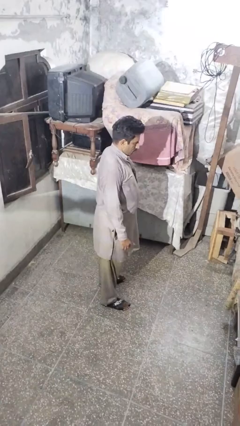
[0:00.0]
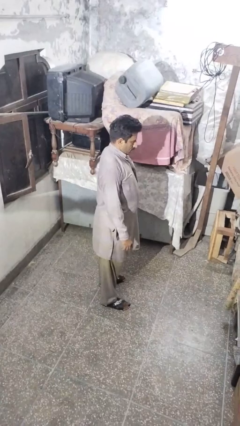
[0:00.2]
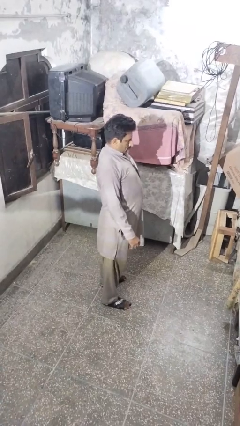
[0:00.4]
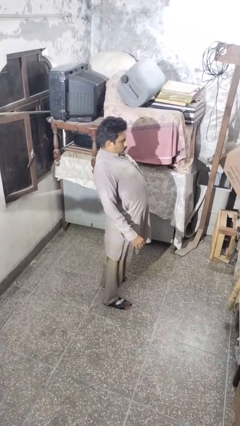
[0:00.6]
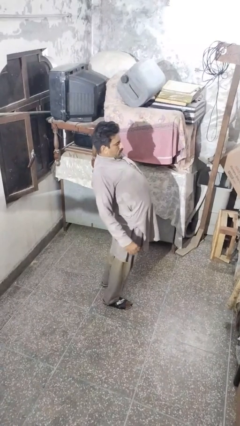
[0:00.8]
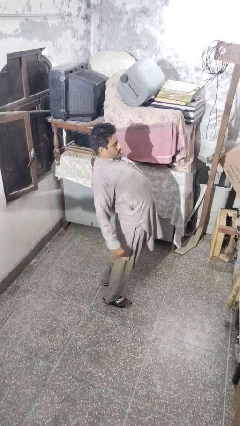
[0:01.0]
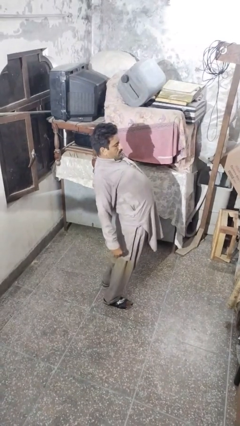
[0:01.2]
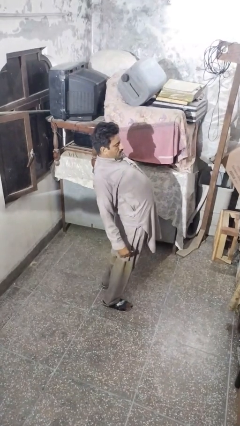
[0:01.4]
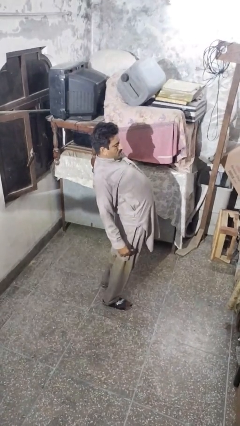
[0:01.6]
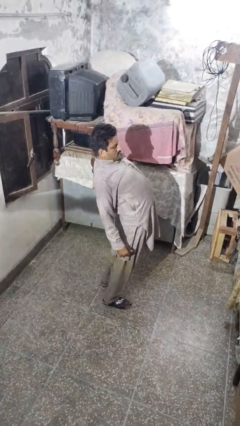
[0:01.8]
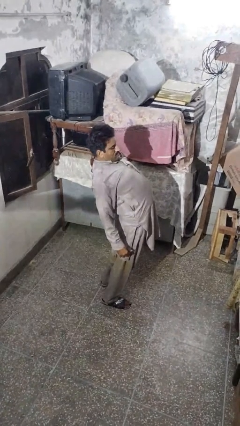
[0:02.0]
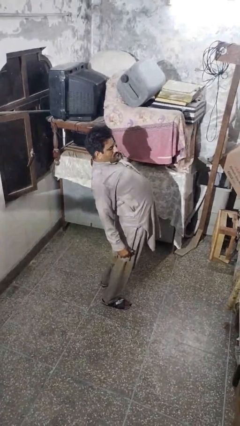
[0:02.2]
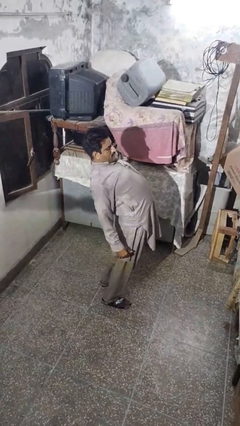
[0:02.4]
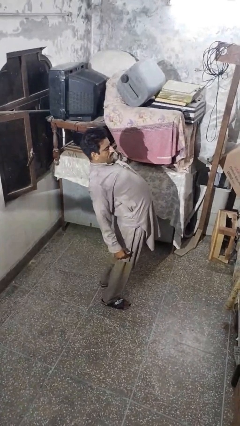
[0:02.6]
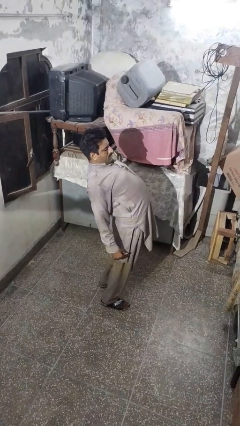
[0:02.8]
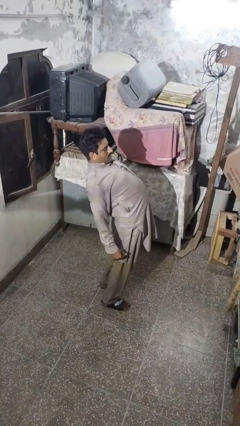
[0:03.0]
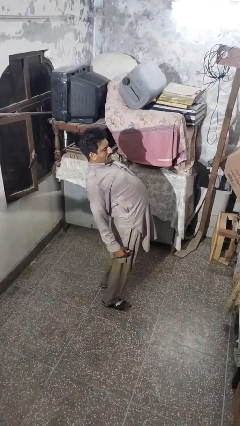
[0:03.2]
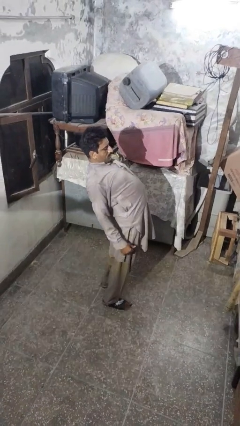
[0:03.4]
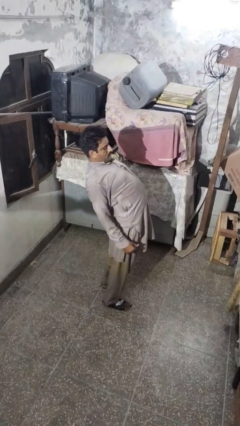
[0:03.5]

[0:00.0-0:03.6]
person stretches back

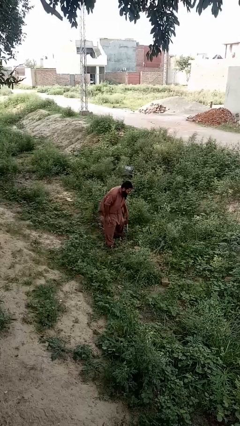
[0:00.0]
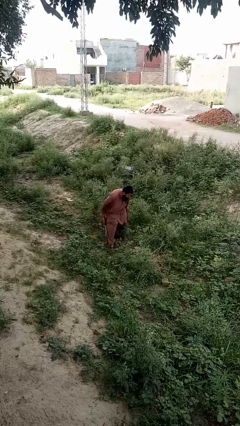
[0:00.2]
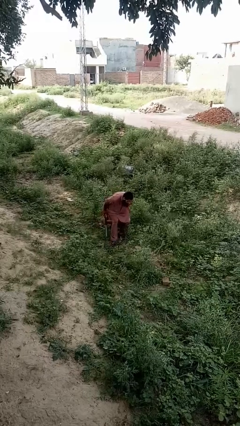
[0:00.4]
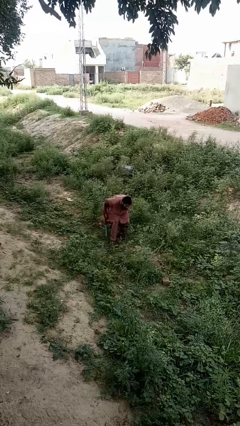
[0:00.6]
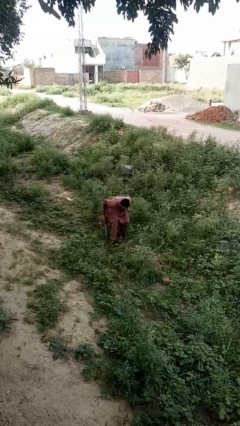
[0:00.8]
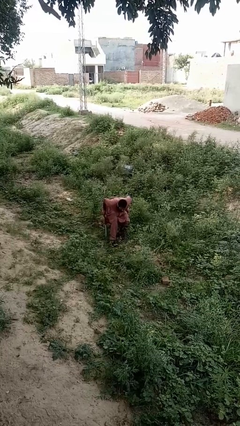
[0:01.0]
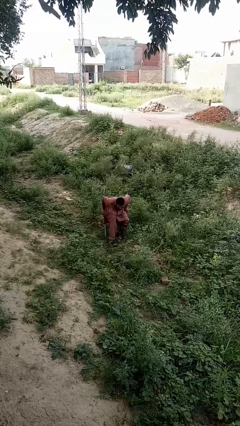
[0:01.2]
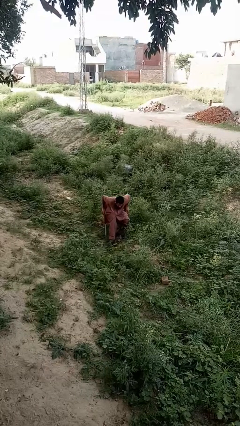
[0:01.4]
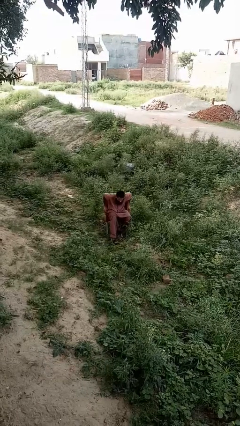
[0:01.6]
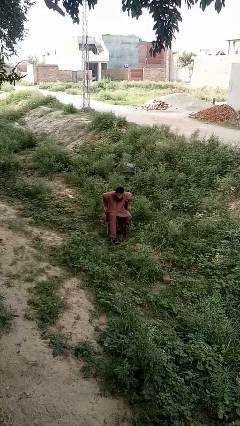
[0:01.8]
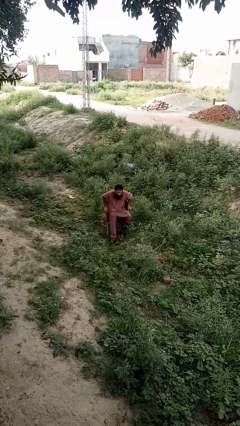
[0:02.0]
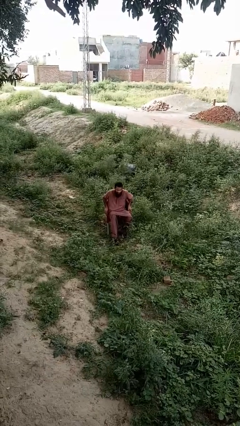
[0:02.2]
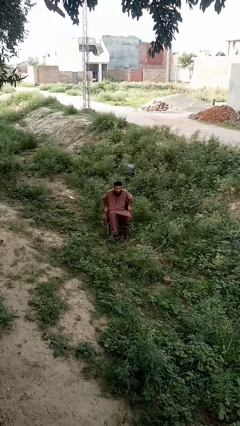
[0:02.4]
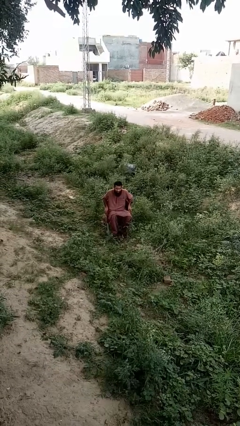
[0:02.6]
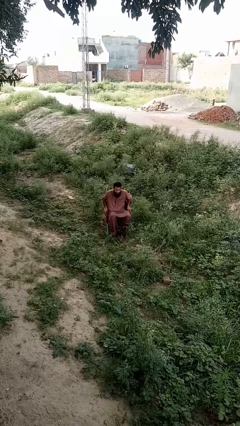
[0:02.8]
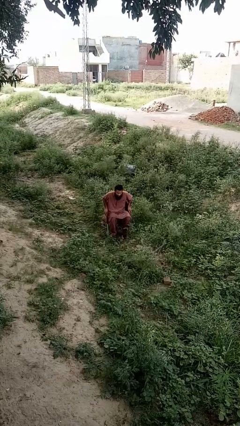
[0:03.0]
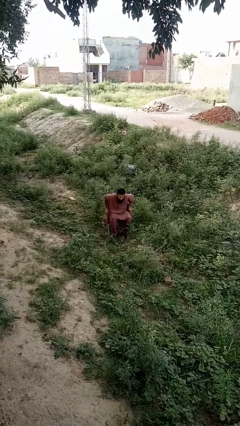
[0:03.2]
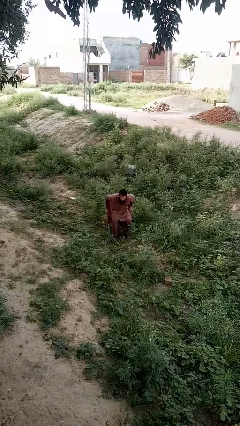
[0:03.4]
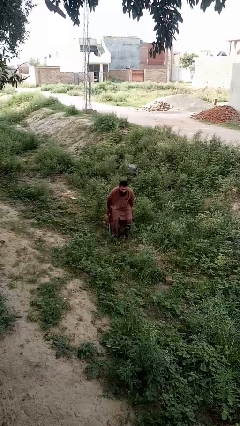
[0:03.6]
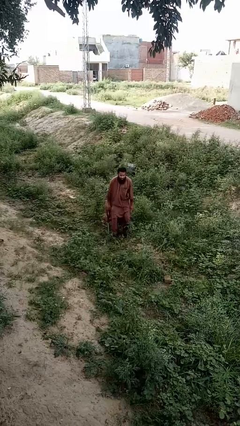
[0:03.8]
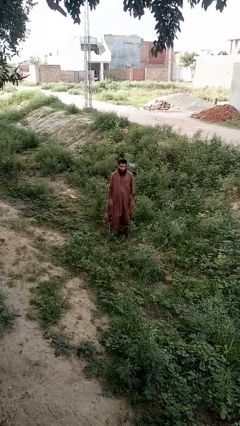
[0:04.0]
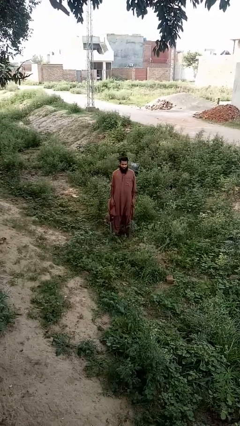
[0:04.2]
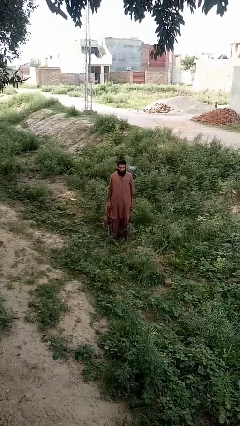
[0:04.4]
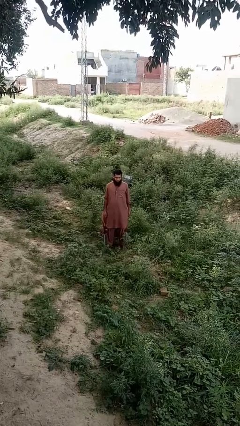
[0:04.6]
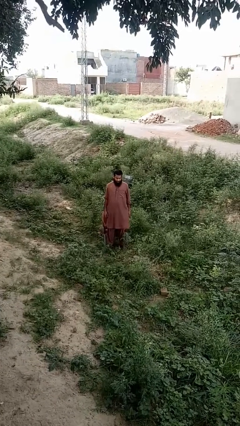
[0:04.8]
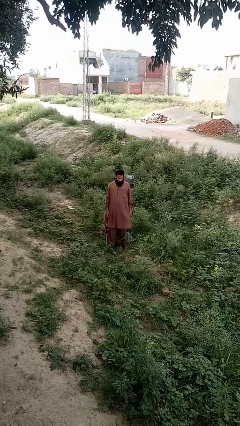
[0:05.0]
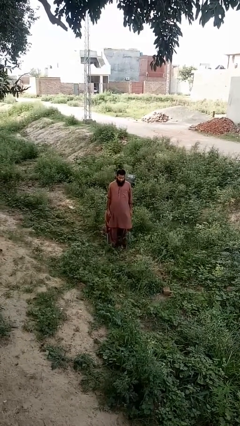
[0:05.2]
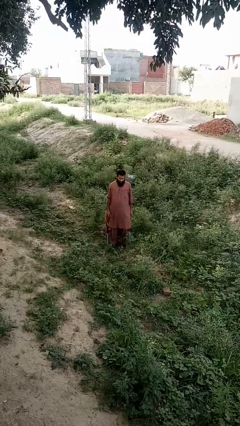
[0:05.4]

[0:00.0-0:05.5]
person sits down

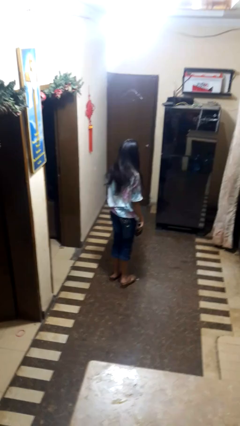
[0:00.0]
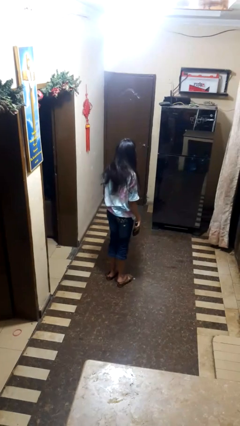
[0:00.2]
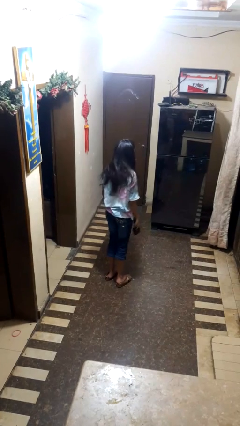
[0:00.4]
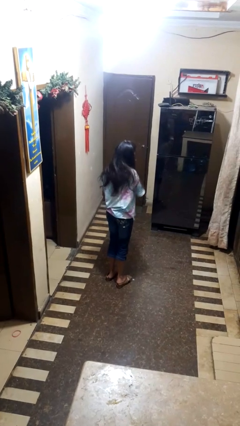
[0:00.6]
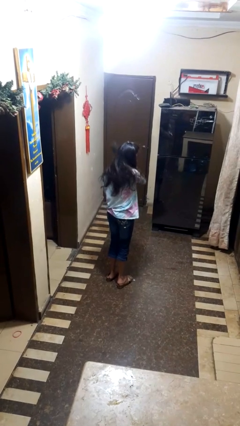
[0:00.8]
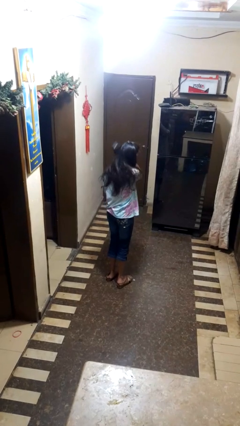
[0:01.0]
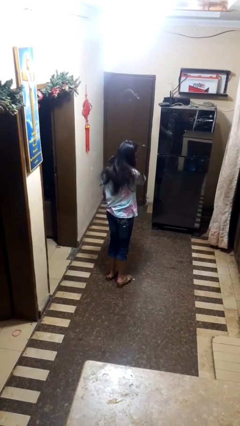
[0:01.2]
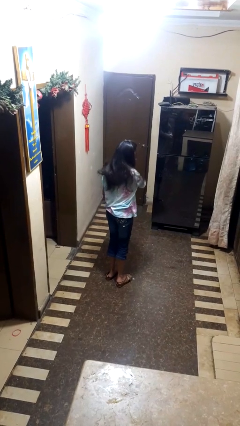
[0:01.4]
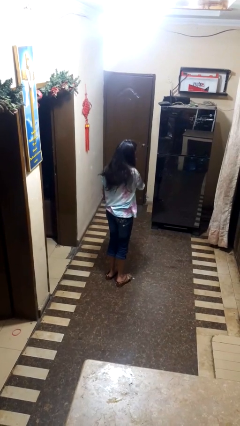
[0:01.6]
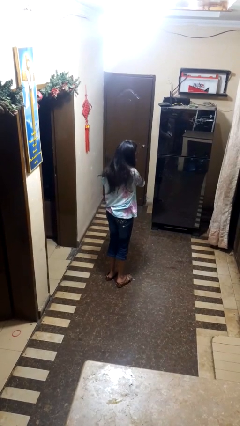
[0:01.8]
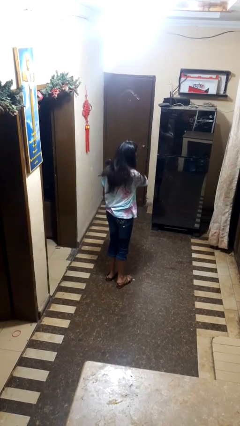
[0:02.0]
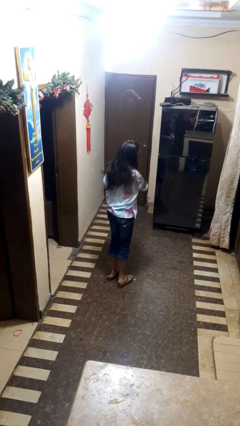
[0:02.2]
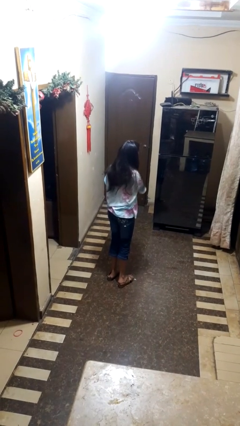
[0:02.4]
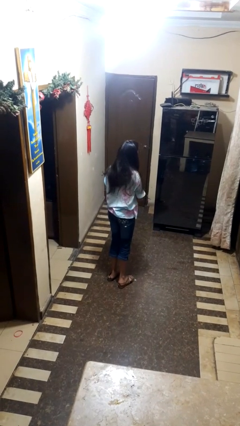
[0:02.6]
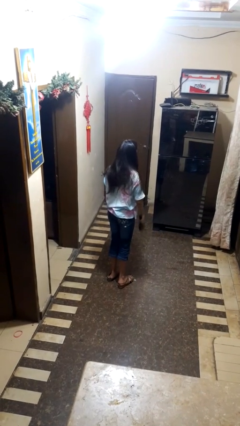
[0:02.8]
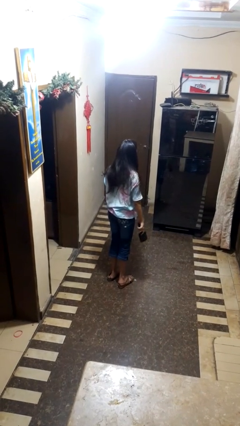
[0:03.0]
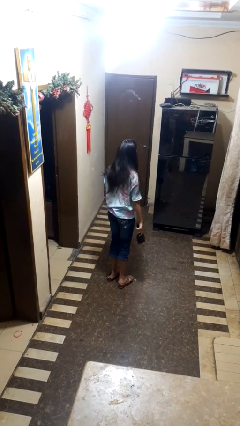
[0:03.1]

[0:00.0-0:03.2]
person brushes hair

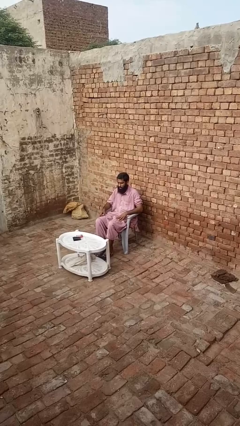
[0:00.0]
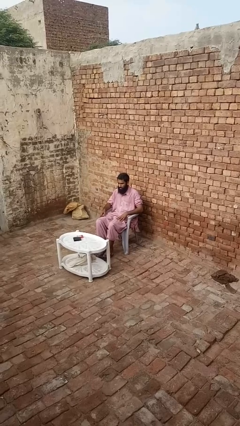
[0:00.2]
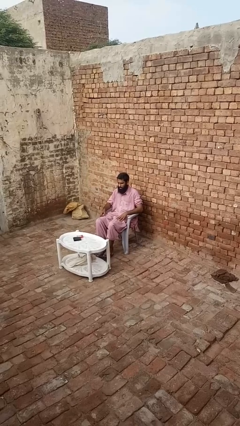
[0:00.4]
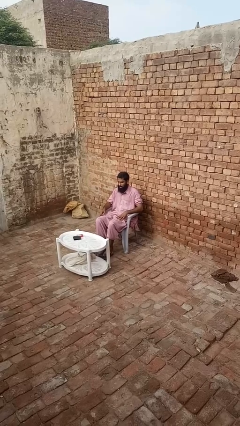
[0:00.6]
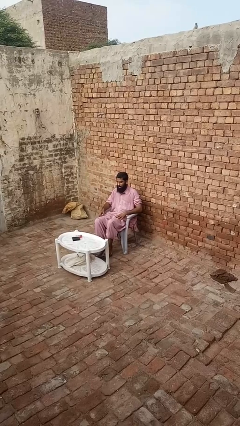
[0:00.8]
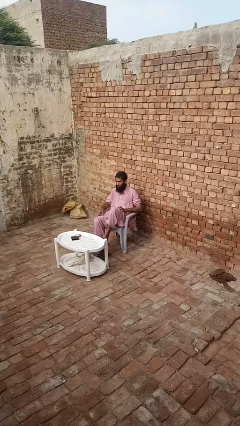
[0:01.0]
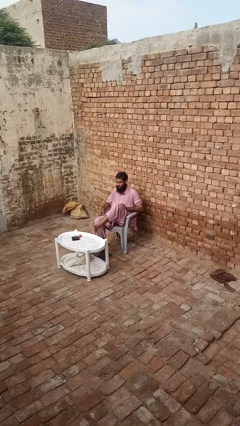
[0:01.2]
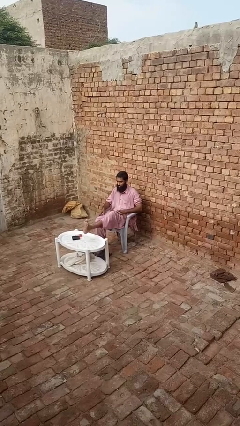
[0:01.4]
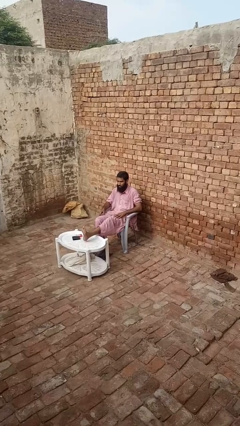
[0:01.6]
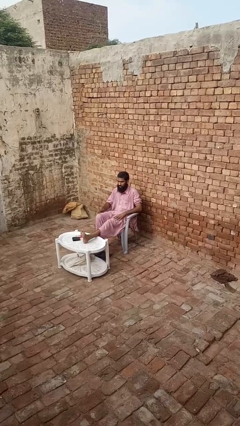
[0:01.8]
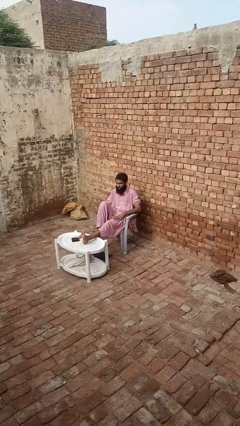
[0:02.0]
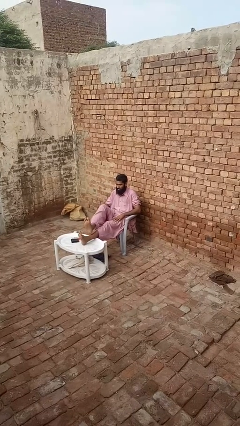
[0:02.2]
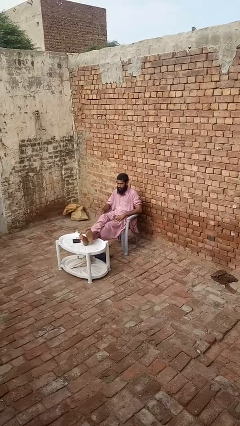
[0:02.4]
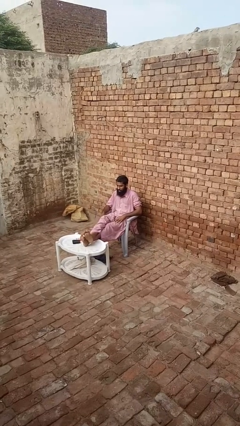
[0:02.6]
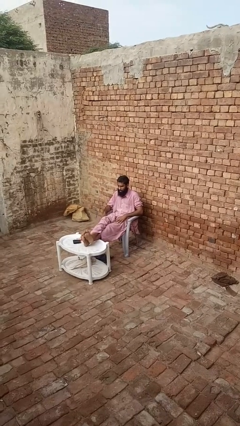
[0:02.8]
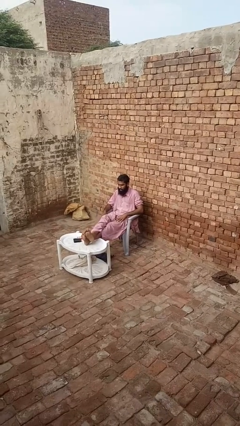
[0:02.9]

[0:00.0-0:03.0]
person puts feet up

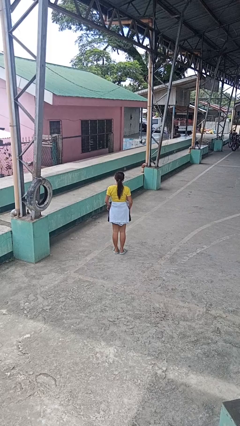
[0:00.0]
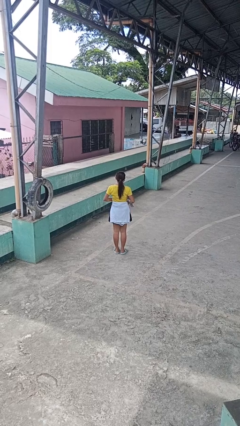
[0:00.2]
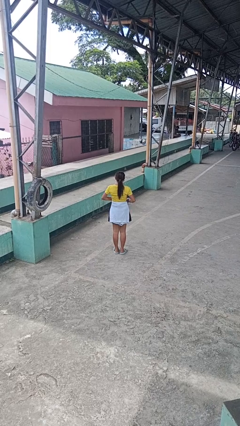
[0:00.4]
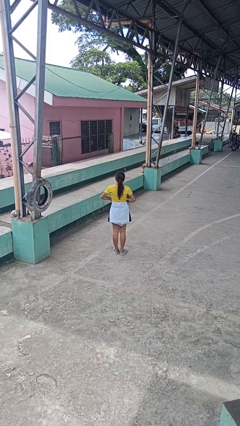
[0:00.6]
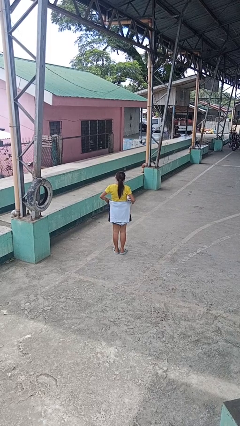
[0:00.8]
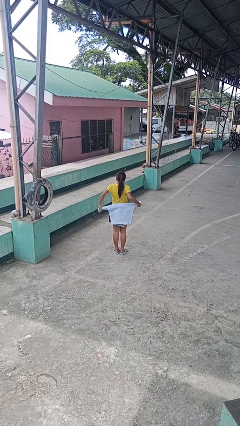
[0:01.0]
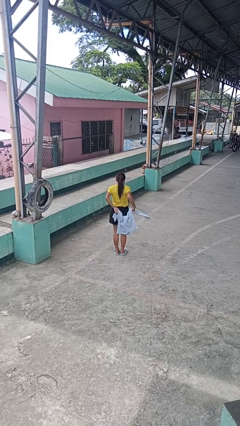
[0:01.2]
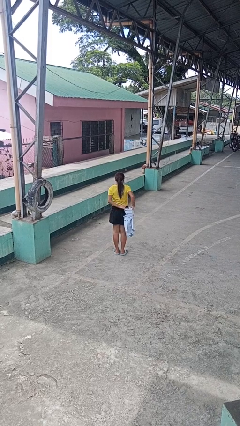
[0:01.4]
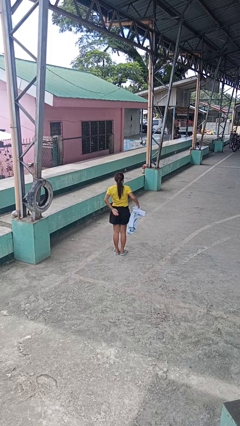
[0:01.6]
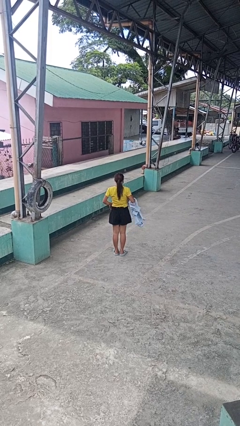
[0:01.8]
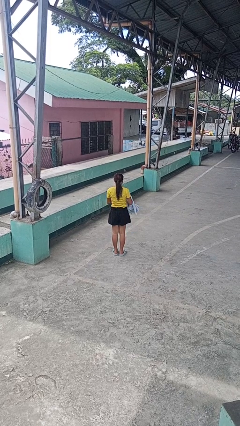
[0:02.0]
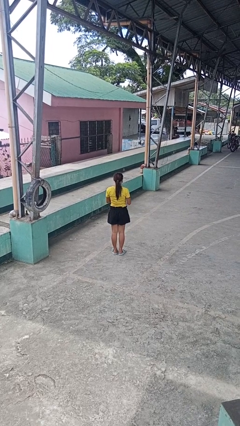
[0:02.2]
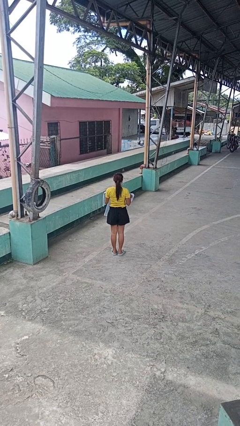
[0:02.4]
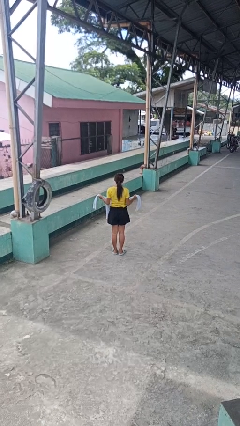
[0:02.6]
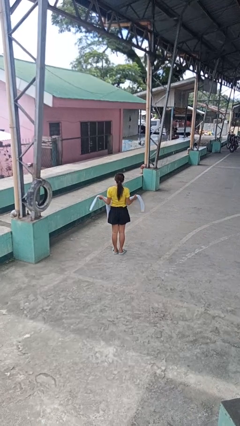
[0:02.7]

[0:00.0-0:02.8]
person unties jacket around waist
